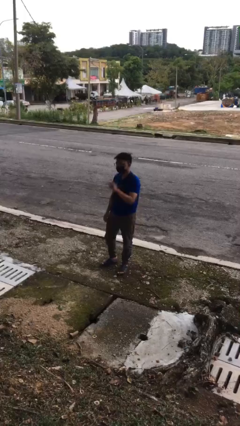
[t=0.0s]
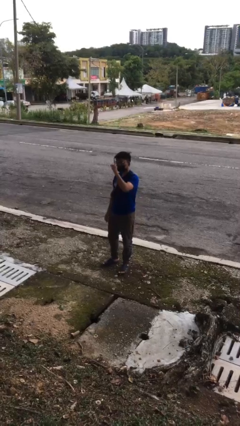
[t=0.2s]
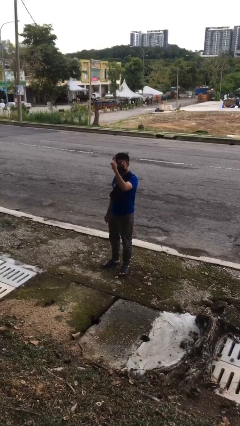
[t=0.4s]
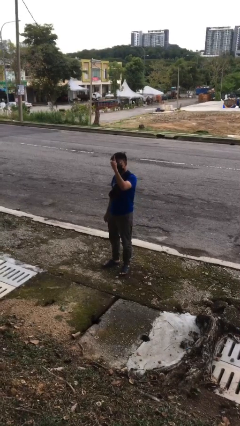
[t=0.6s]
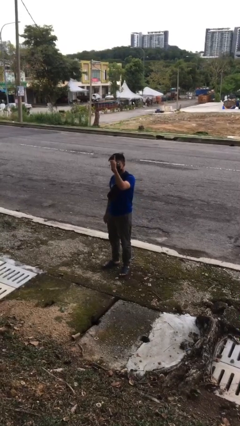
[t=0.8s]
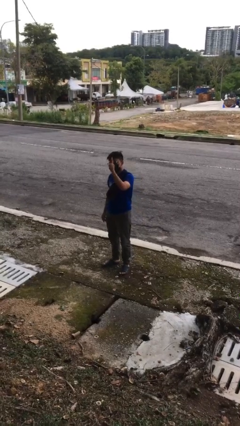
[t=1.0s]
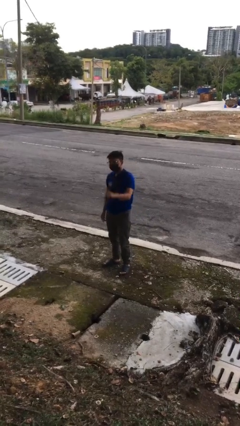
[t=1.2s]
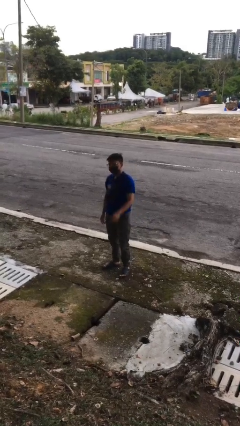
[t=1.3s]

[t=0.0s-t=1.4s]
person gestures number one

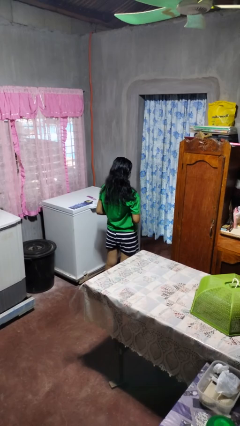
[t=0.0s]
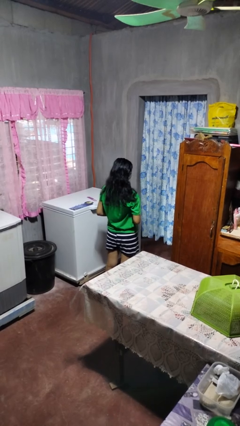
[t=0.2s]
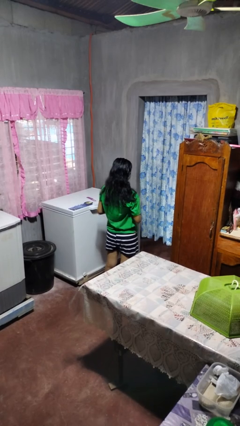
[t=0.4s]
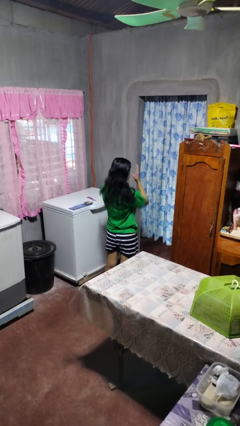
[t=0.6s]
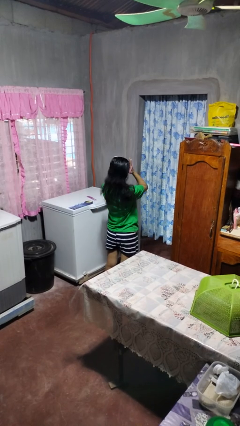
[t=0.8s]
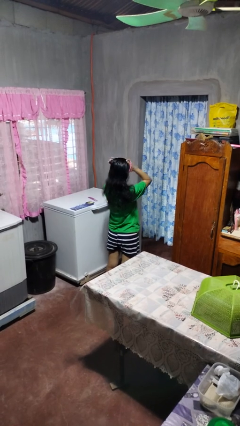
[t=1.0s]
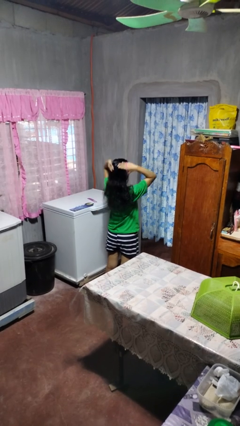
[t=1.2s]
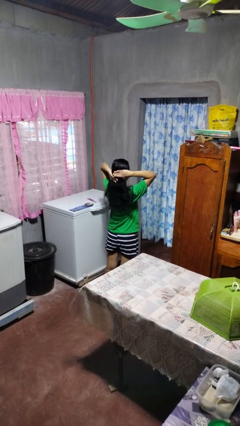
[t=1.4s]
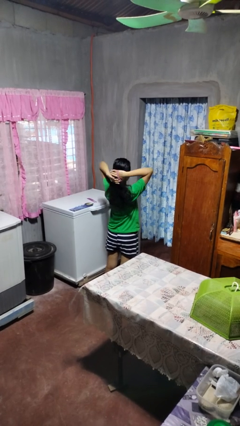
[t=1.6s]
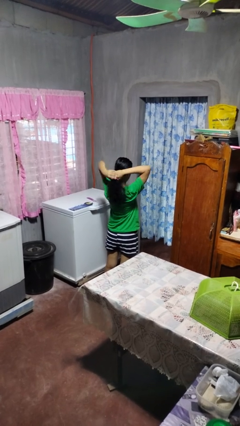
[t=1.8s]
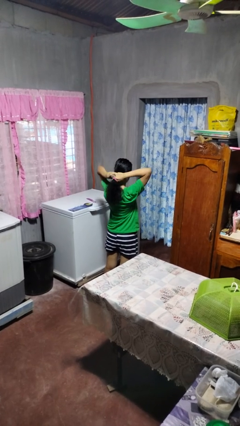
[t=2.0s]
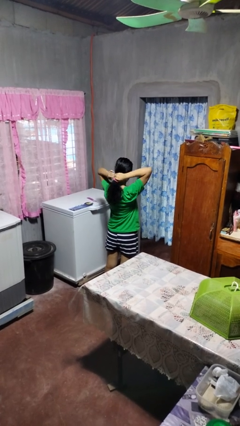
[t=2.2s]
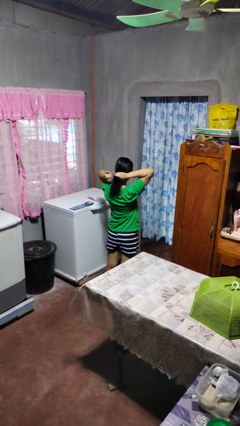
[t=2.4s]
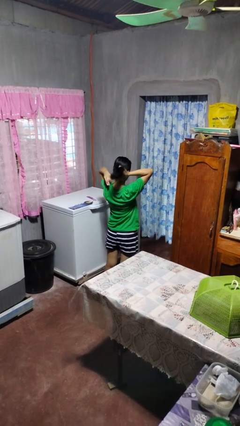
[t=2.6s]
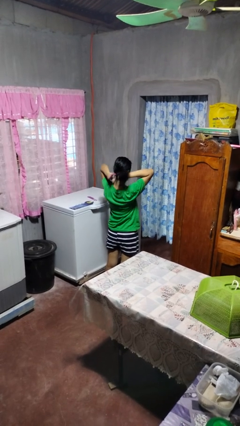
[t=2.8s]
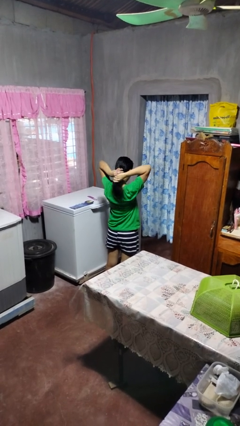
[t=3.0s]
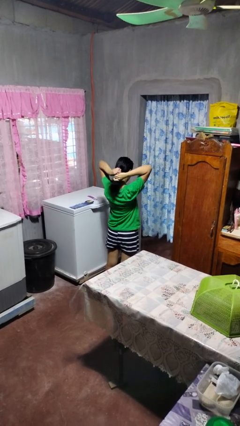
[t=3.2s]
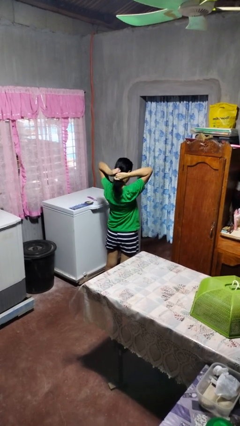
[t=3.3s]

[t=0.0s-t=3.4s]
person puts hair in ponytail

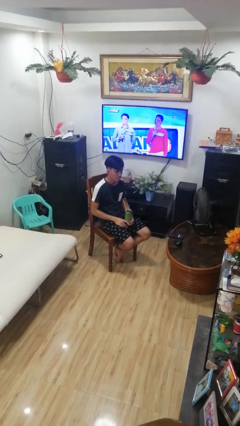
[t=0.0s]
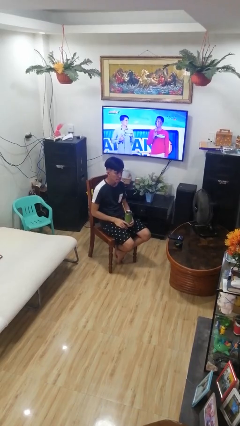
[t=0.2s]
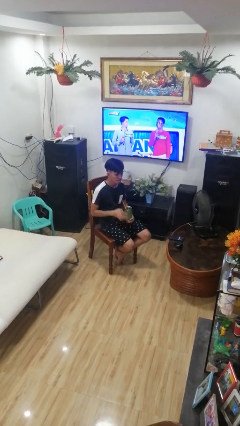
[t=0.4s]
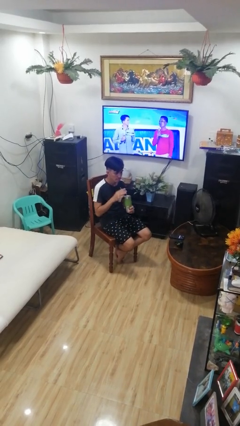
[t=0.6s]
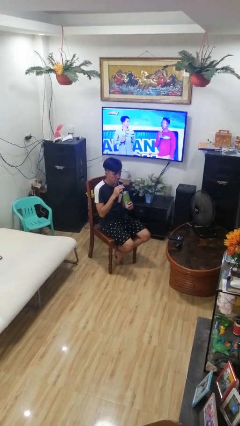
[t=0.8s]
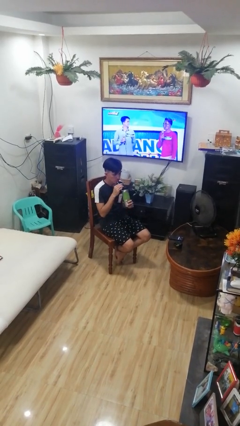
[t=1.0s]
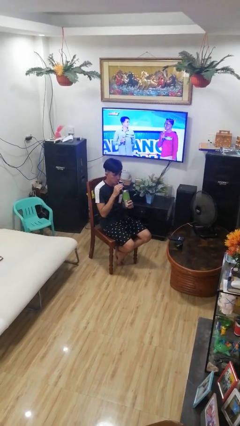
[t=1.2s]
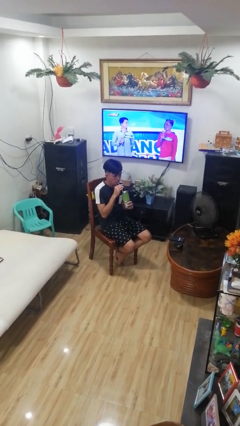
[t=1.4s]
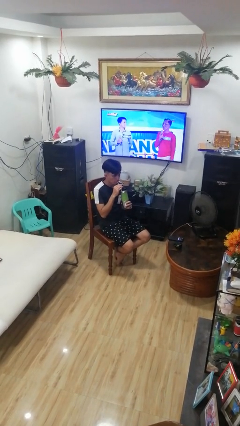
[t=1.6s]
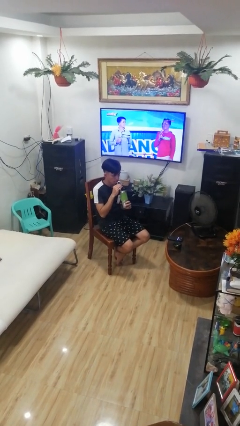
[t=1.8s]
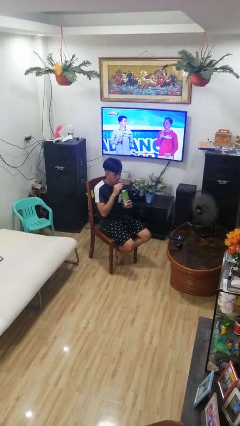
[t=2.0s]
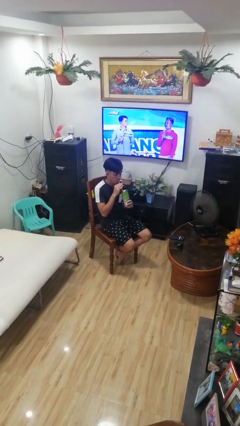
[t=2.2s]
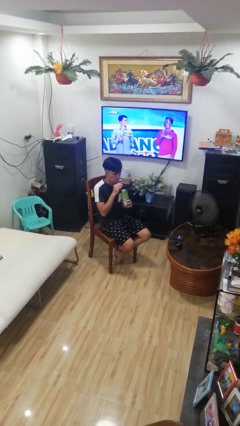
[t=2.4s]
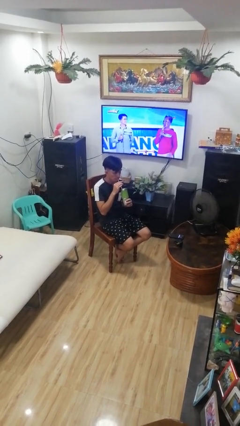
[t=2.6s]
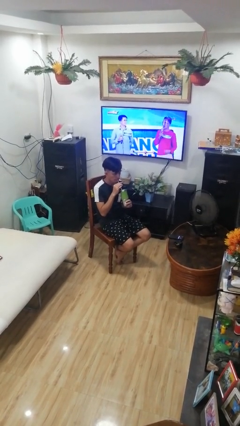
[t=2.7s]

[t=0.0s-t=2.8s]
person drinks from straw

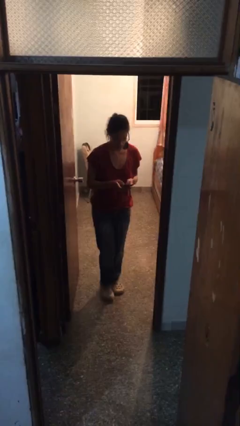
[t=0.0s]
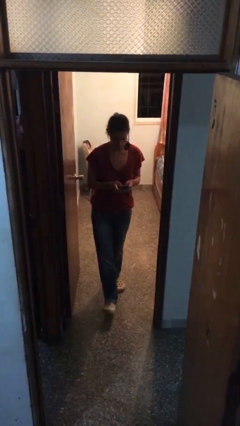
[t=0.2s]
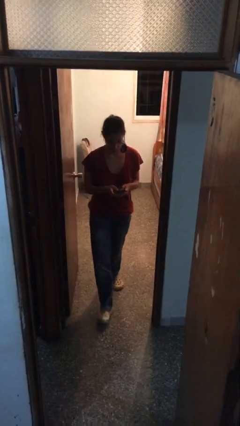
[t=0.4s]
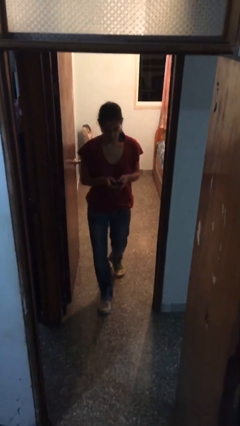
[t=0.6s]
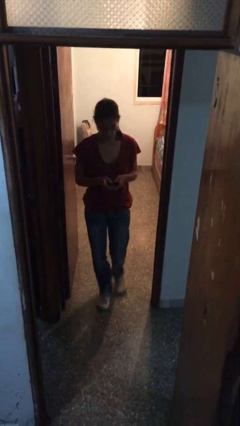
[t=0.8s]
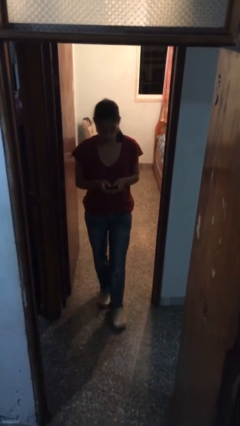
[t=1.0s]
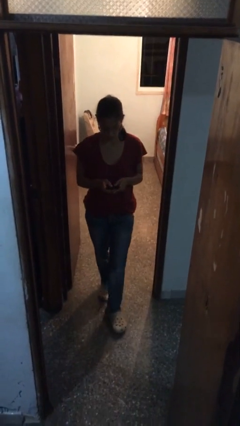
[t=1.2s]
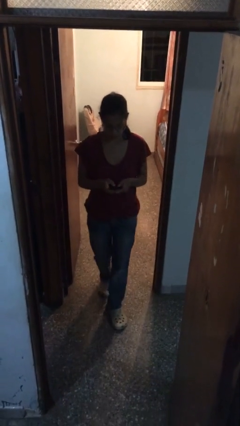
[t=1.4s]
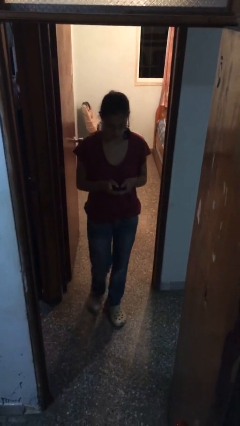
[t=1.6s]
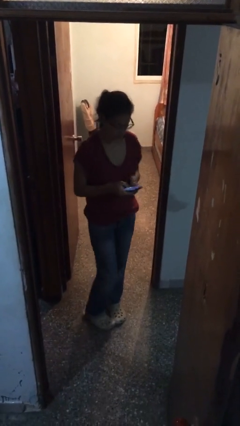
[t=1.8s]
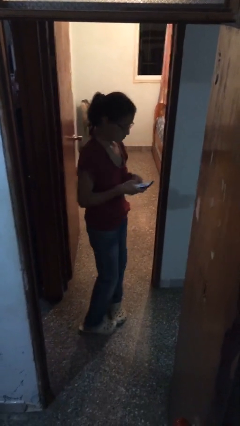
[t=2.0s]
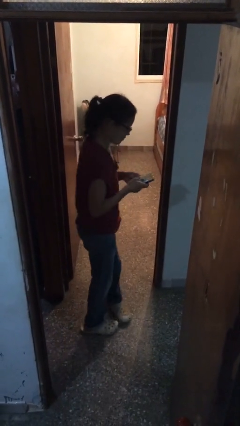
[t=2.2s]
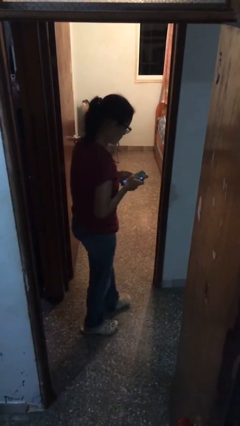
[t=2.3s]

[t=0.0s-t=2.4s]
person enters scene through structure

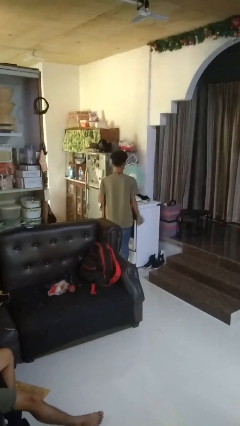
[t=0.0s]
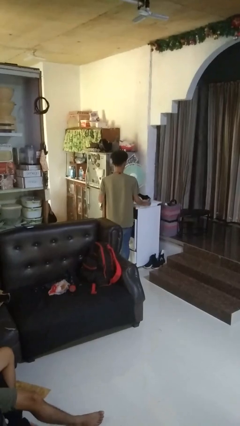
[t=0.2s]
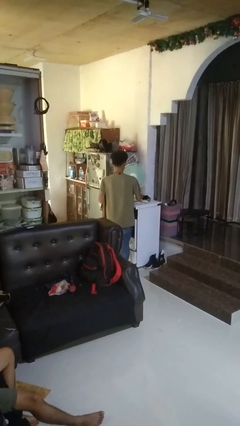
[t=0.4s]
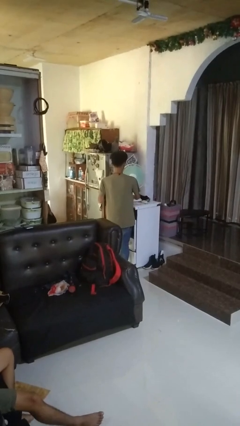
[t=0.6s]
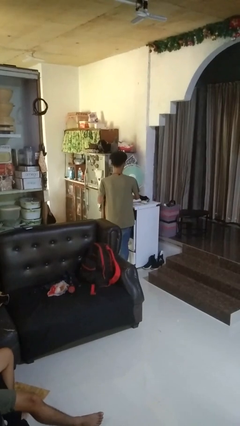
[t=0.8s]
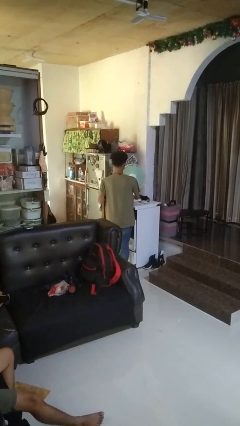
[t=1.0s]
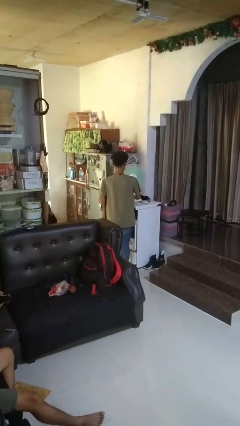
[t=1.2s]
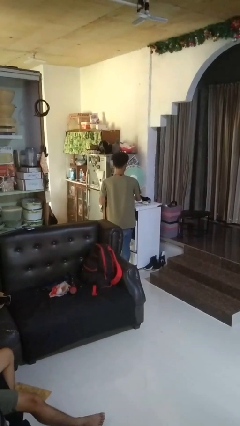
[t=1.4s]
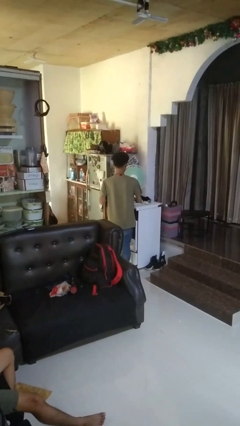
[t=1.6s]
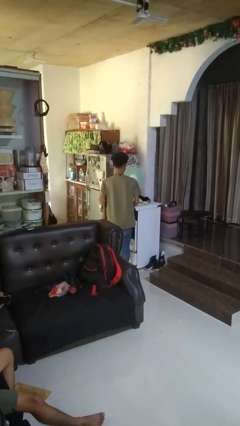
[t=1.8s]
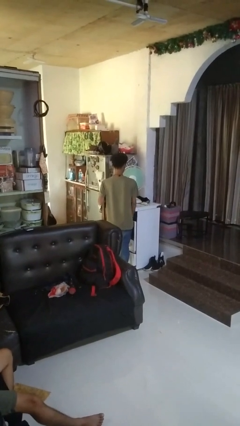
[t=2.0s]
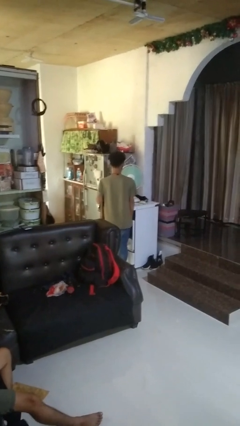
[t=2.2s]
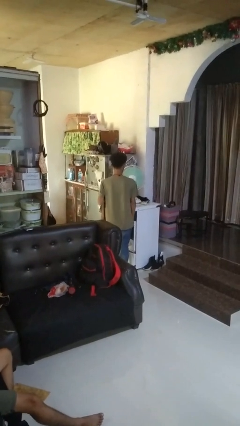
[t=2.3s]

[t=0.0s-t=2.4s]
person turns off fan

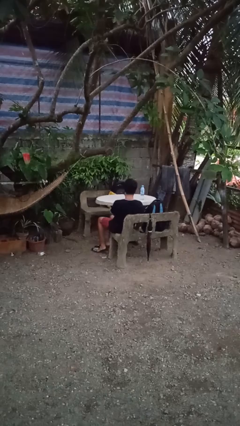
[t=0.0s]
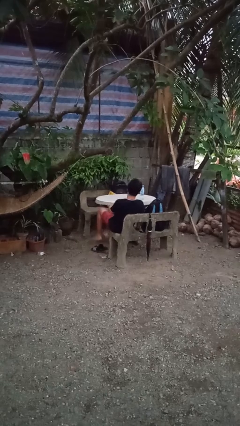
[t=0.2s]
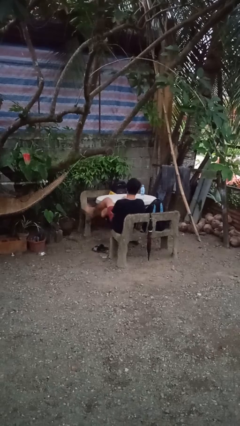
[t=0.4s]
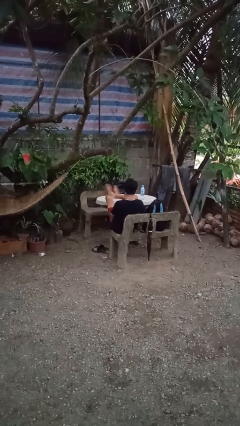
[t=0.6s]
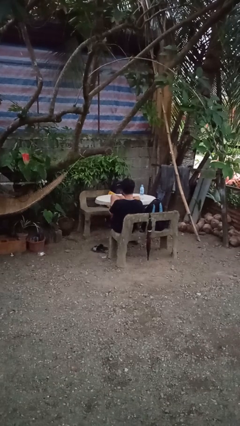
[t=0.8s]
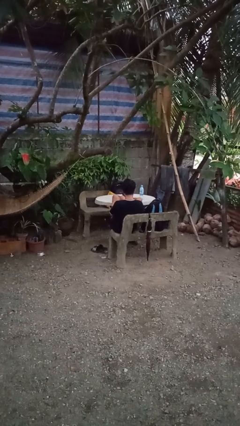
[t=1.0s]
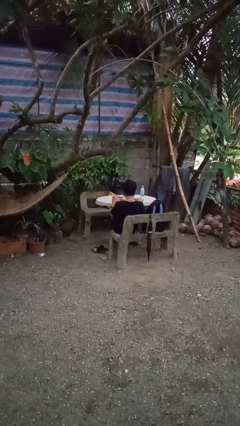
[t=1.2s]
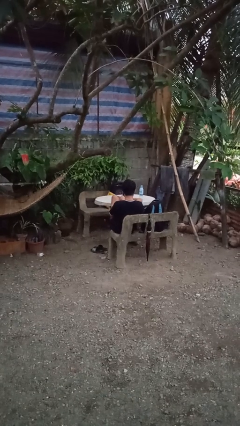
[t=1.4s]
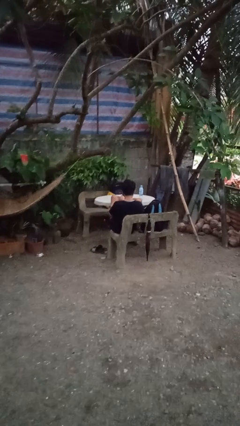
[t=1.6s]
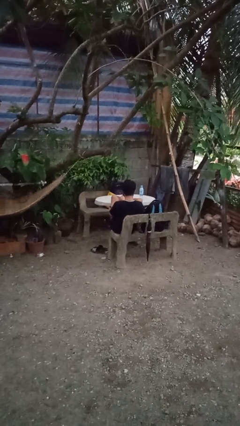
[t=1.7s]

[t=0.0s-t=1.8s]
person puts feet up

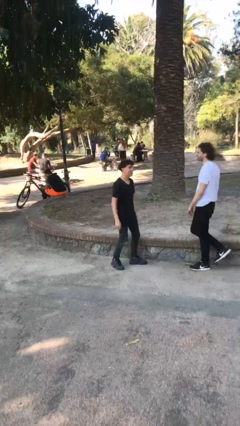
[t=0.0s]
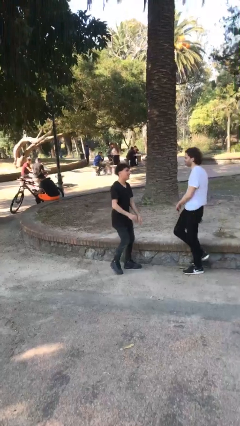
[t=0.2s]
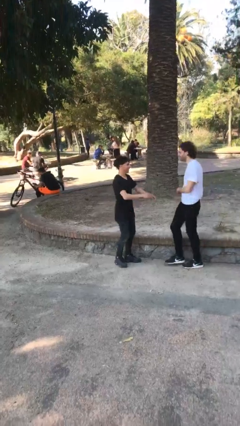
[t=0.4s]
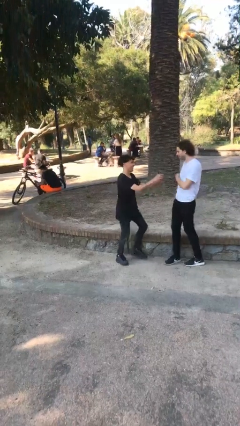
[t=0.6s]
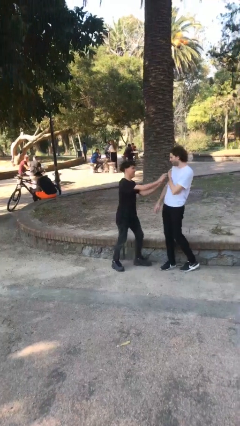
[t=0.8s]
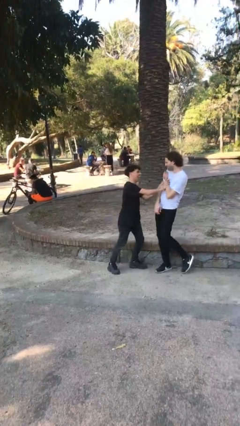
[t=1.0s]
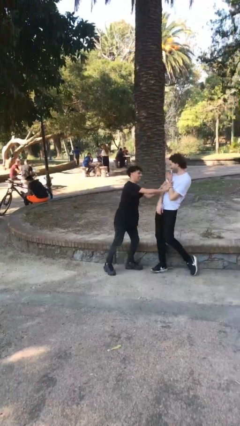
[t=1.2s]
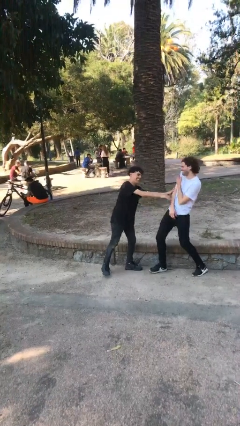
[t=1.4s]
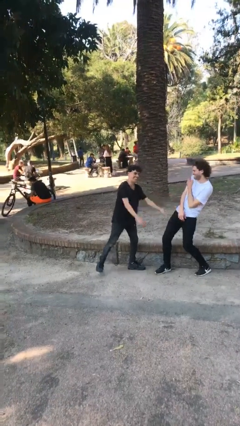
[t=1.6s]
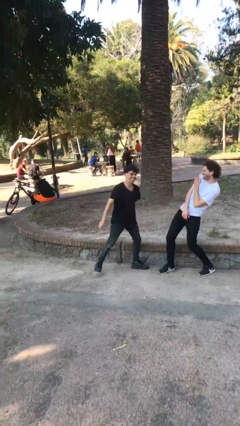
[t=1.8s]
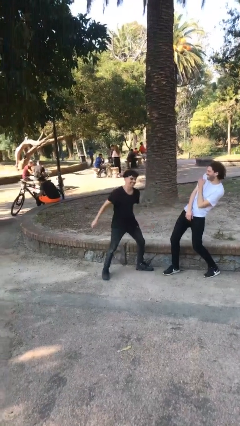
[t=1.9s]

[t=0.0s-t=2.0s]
person shoves person

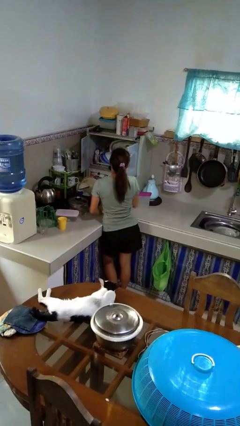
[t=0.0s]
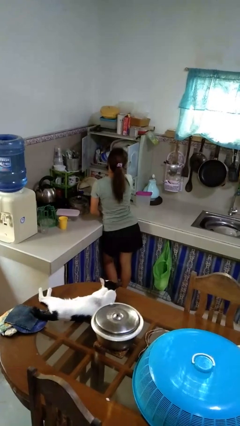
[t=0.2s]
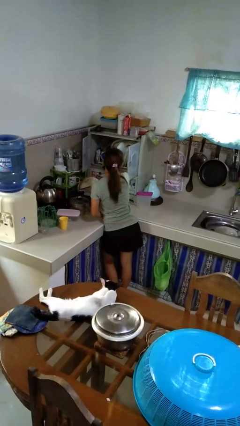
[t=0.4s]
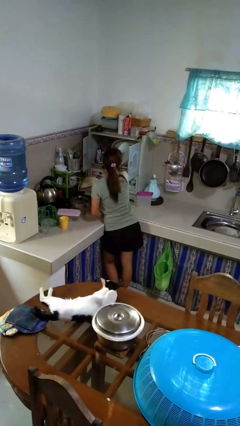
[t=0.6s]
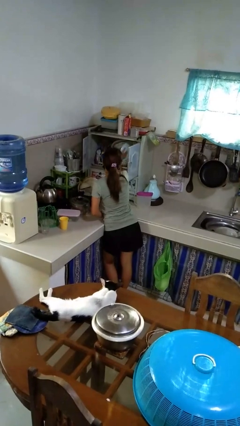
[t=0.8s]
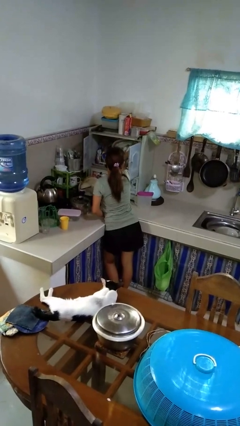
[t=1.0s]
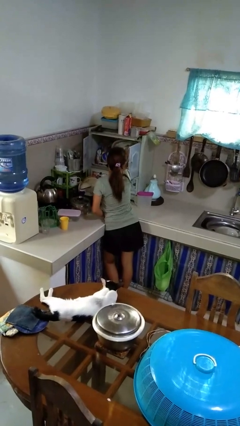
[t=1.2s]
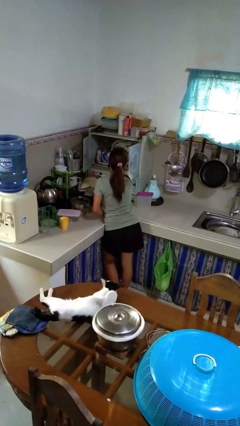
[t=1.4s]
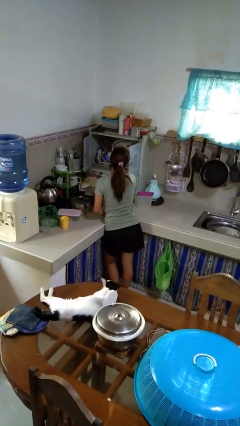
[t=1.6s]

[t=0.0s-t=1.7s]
person puts object into kitchen drawer
